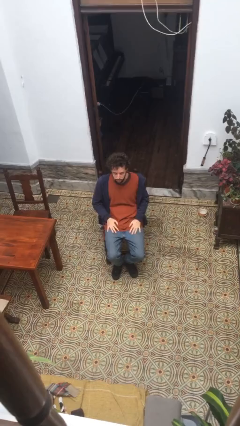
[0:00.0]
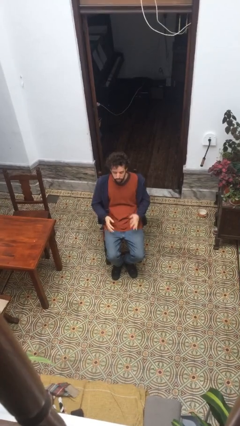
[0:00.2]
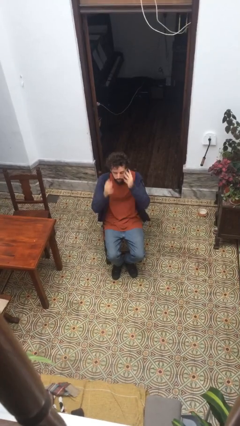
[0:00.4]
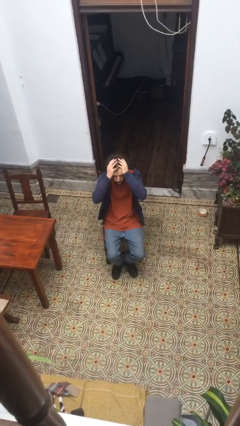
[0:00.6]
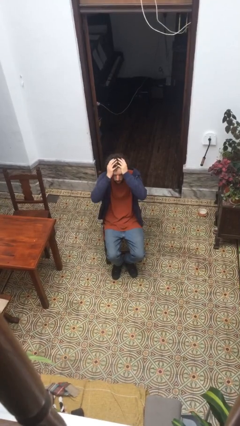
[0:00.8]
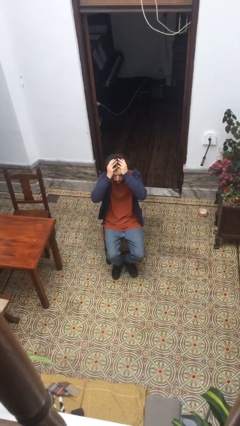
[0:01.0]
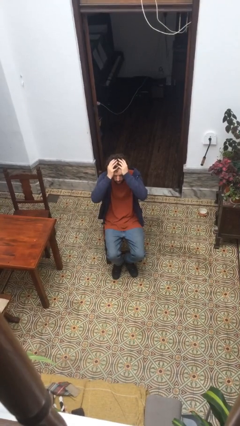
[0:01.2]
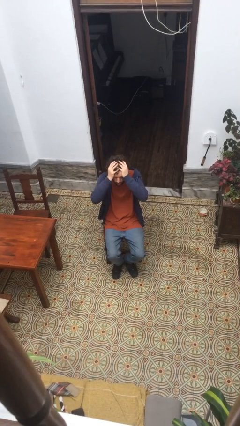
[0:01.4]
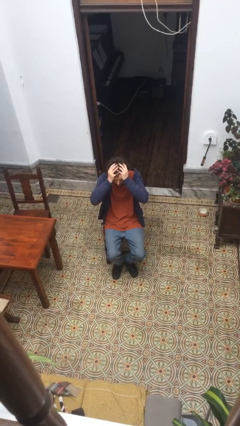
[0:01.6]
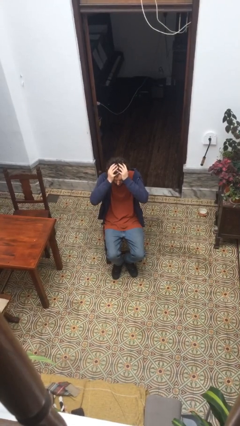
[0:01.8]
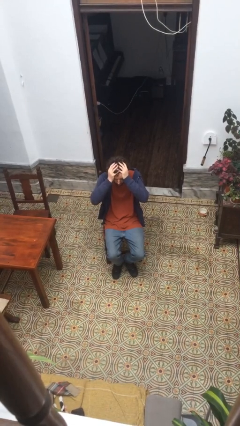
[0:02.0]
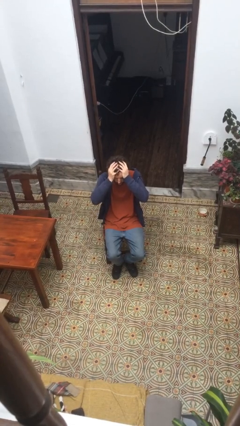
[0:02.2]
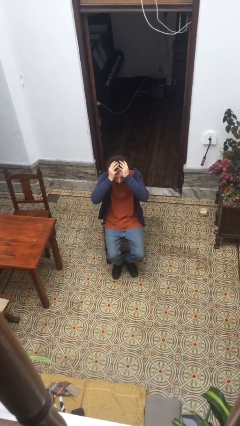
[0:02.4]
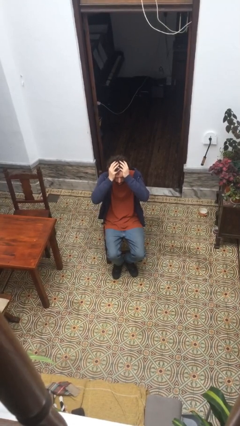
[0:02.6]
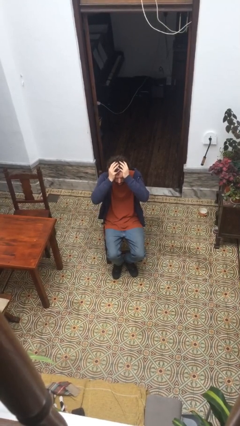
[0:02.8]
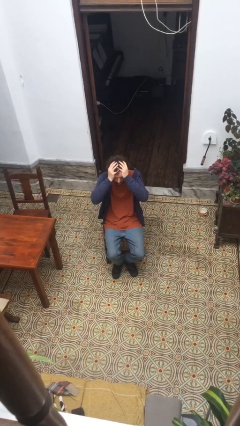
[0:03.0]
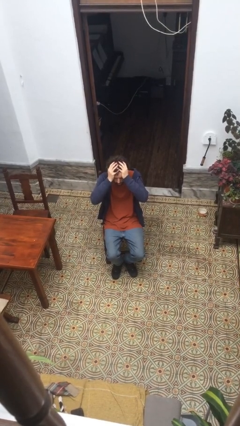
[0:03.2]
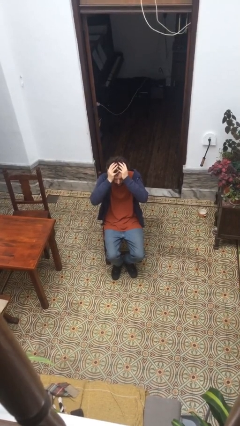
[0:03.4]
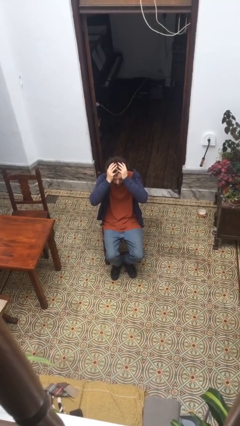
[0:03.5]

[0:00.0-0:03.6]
person covers face with hands

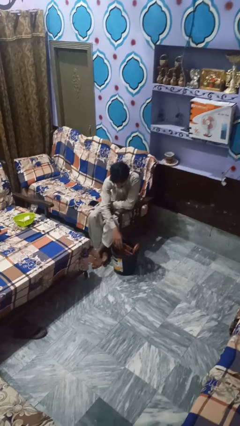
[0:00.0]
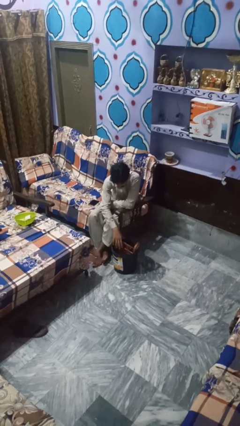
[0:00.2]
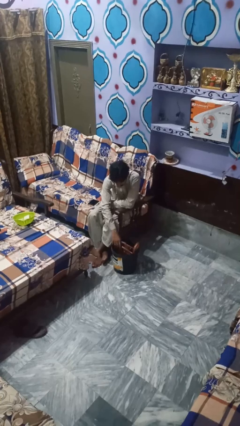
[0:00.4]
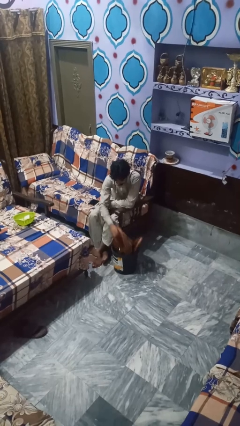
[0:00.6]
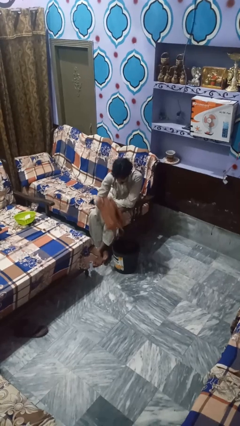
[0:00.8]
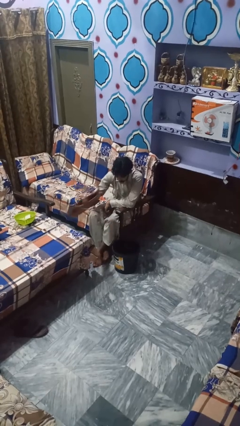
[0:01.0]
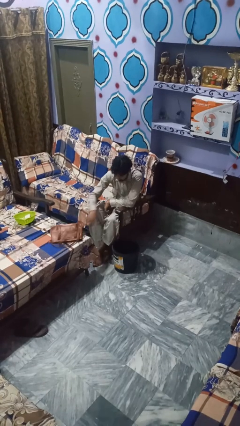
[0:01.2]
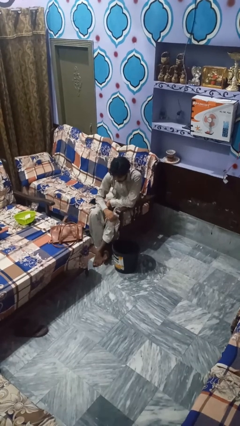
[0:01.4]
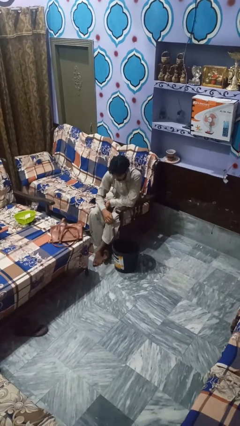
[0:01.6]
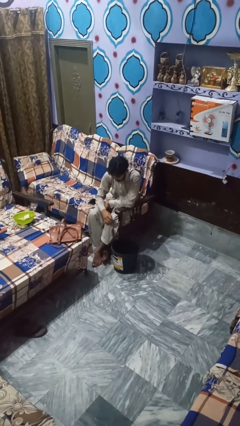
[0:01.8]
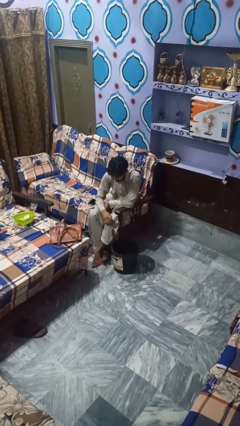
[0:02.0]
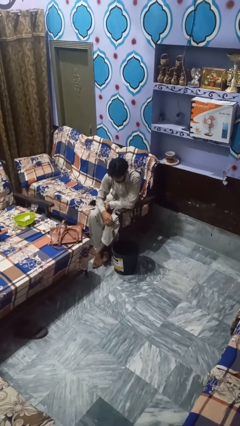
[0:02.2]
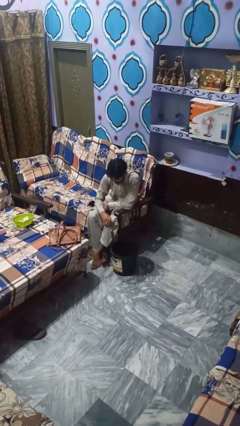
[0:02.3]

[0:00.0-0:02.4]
person takes object from basket

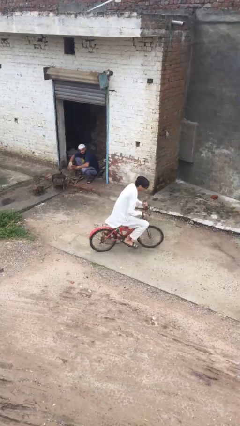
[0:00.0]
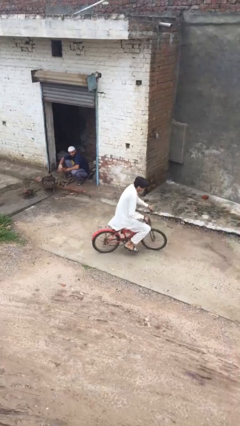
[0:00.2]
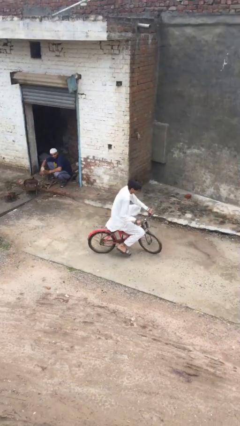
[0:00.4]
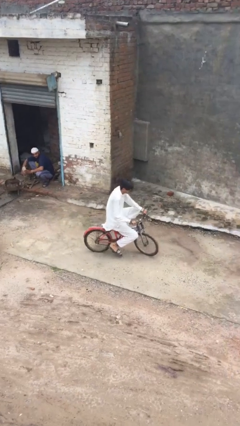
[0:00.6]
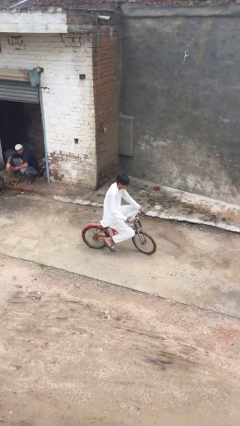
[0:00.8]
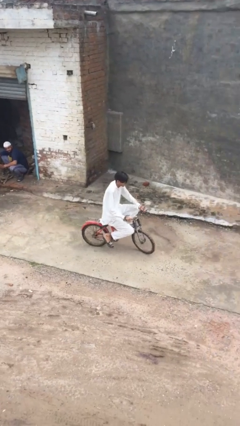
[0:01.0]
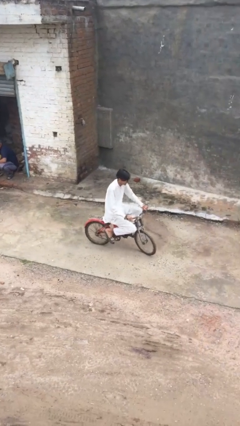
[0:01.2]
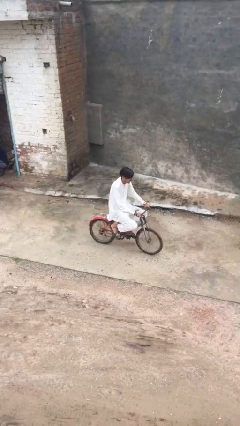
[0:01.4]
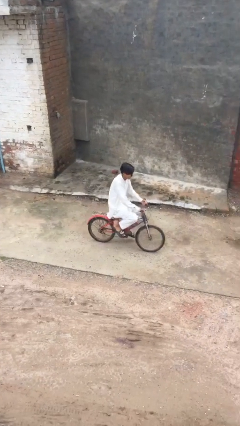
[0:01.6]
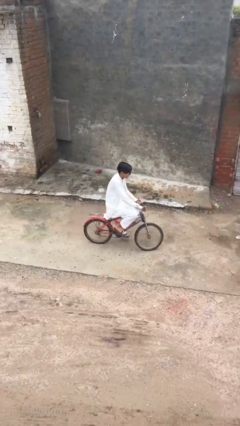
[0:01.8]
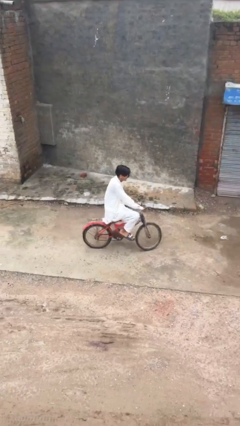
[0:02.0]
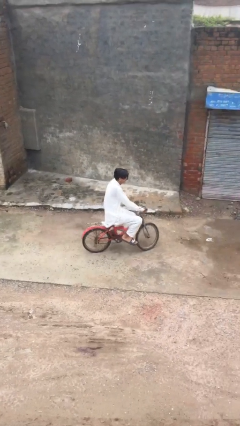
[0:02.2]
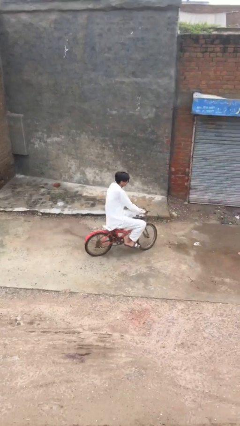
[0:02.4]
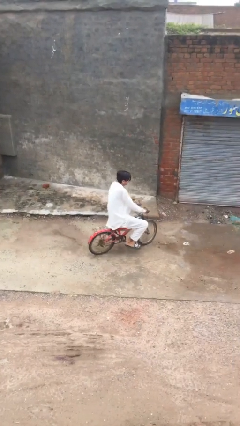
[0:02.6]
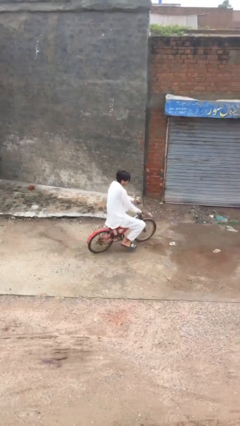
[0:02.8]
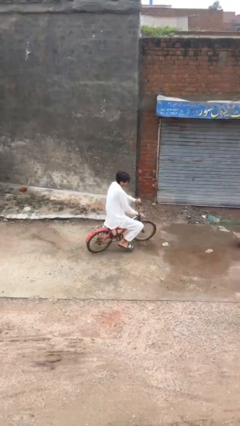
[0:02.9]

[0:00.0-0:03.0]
person rides bicycle

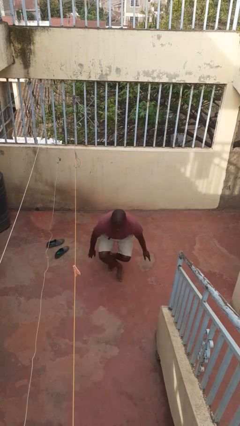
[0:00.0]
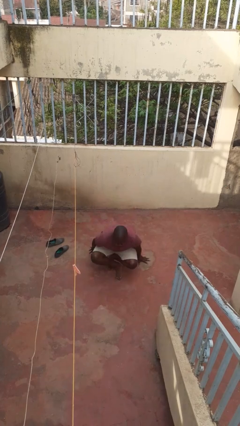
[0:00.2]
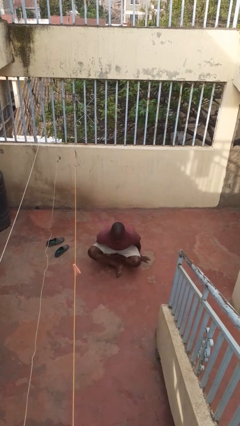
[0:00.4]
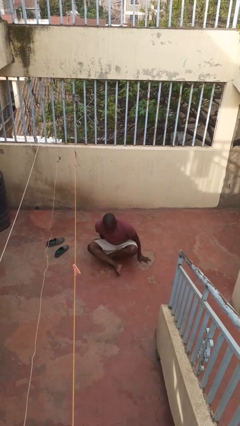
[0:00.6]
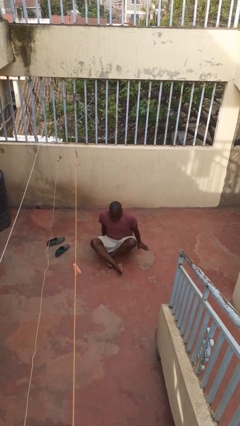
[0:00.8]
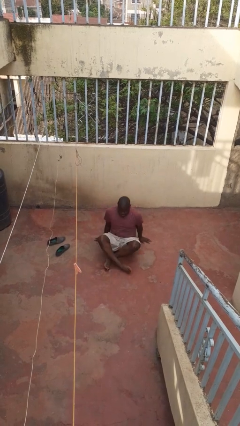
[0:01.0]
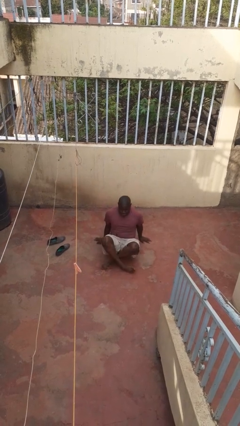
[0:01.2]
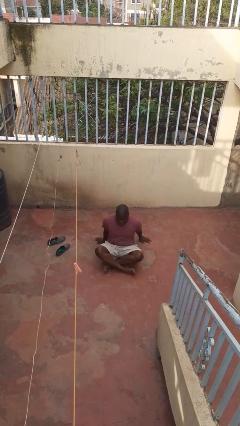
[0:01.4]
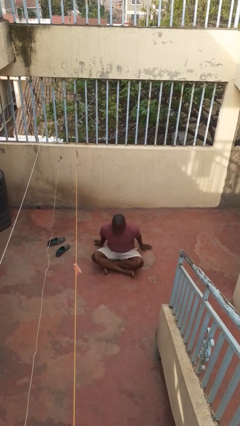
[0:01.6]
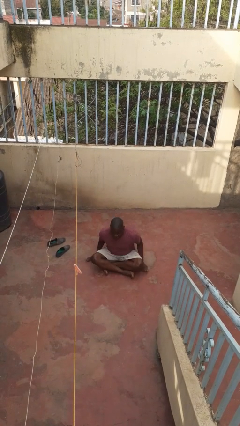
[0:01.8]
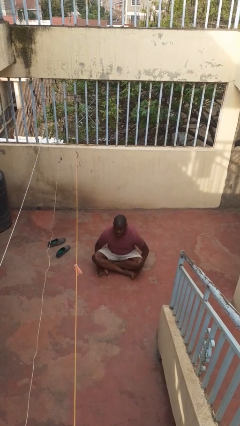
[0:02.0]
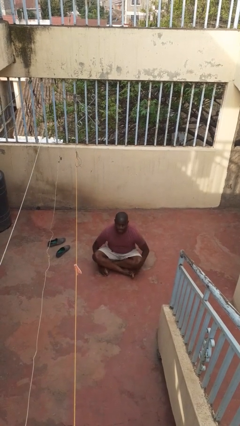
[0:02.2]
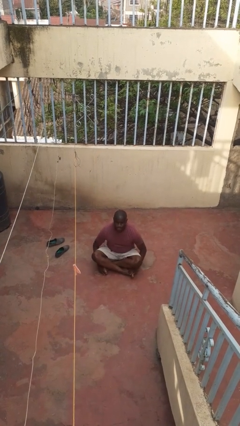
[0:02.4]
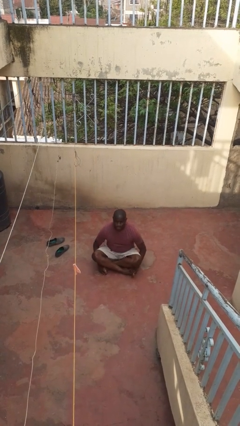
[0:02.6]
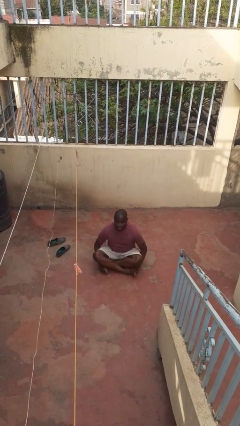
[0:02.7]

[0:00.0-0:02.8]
person sits crisscross

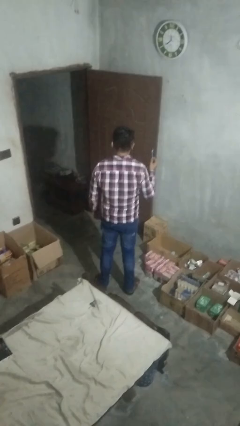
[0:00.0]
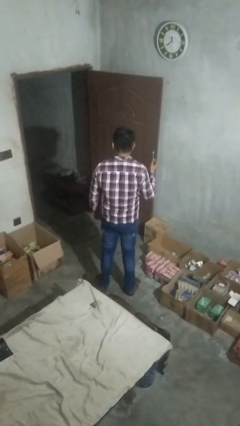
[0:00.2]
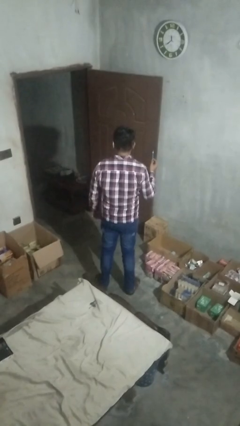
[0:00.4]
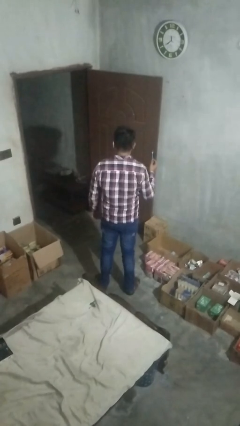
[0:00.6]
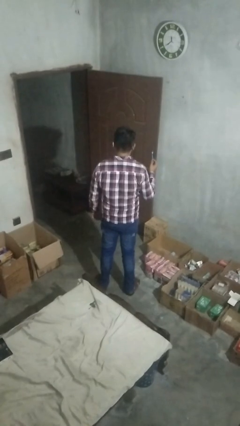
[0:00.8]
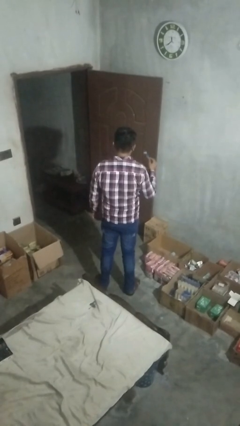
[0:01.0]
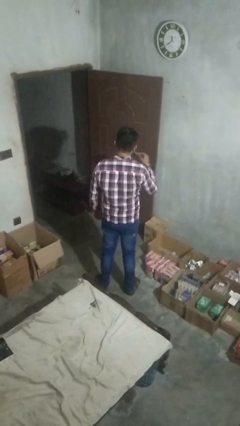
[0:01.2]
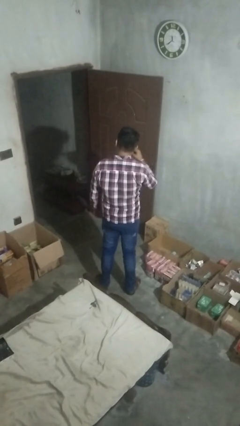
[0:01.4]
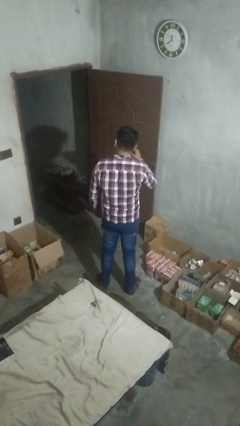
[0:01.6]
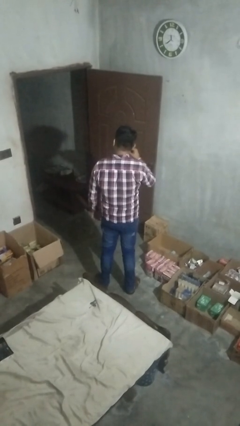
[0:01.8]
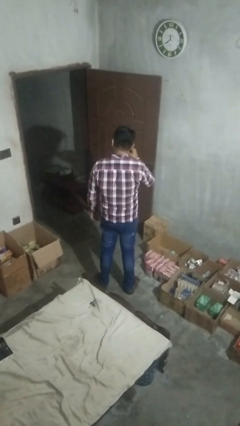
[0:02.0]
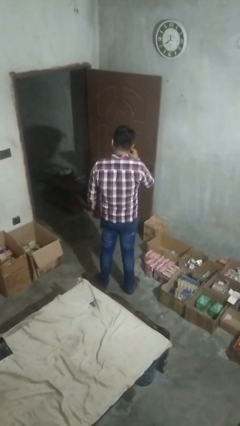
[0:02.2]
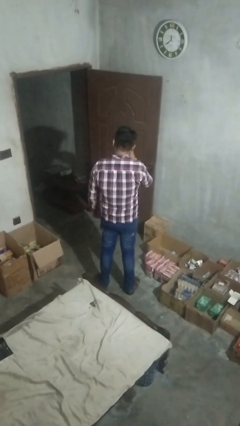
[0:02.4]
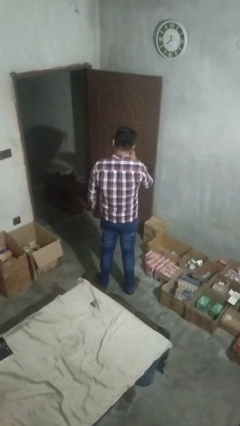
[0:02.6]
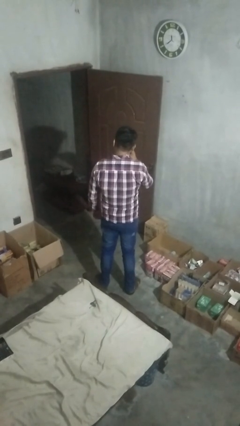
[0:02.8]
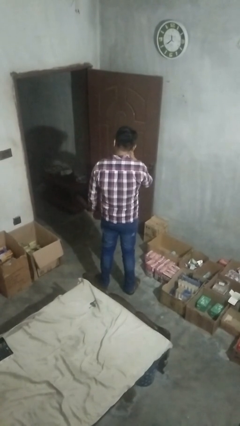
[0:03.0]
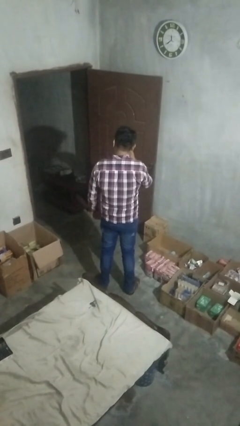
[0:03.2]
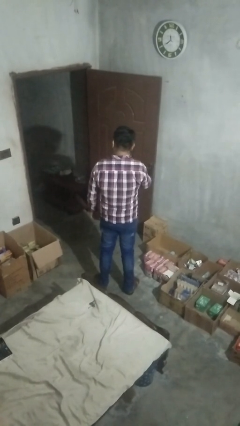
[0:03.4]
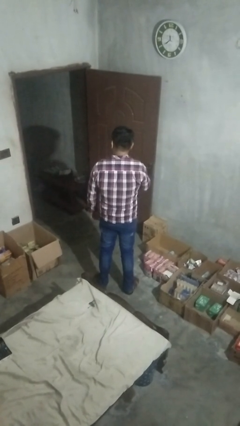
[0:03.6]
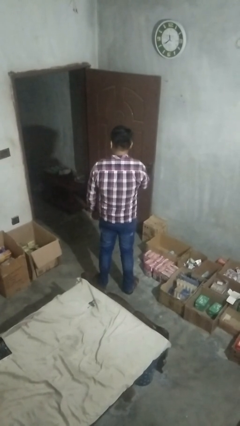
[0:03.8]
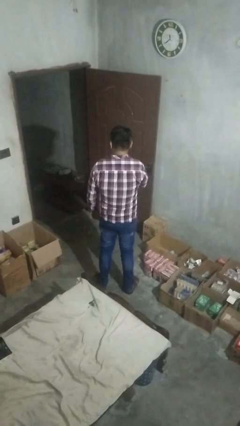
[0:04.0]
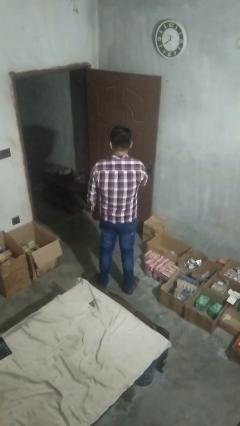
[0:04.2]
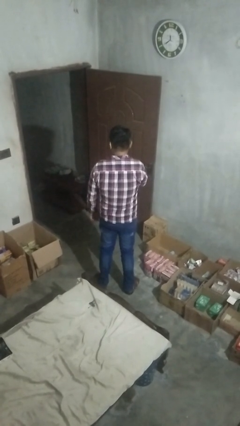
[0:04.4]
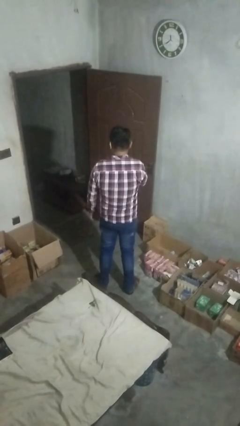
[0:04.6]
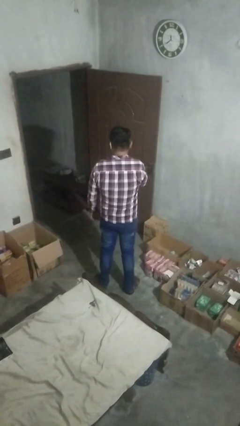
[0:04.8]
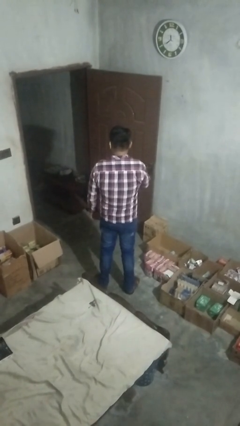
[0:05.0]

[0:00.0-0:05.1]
person brushes teeth

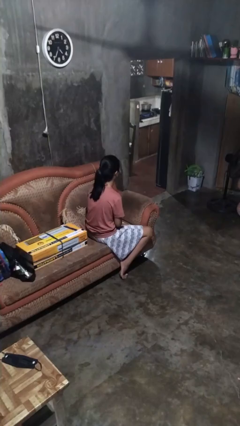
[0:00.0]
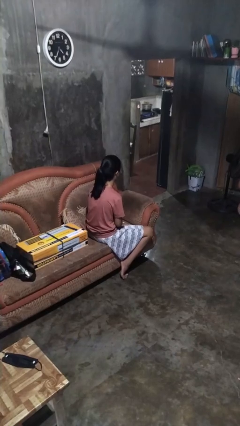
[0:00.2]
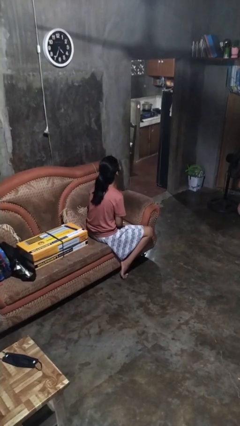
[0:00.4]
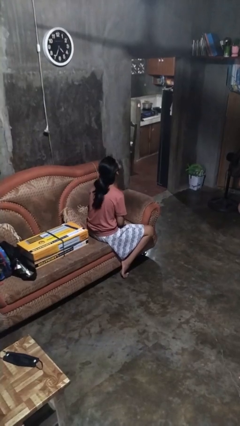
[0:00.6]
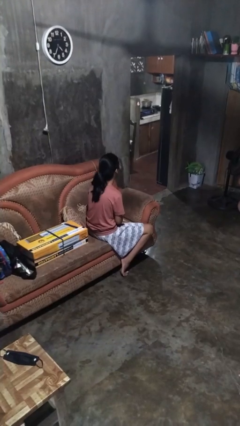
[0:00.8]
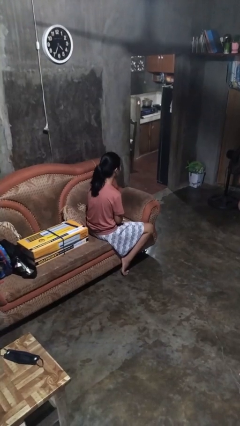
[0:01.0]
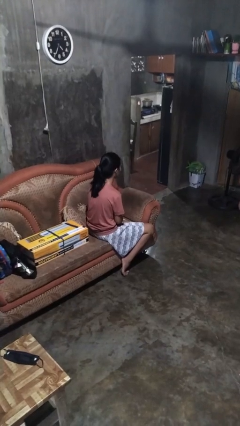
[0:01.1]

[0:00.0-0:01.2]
person nods head
